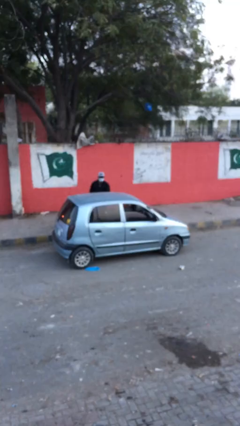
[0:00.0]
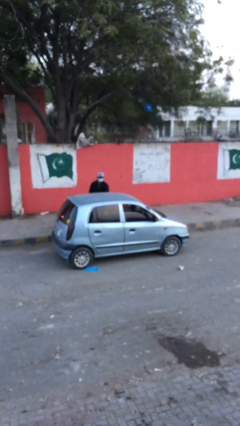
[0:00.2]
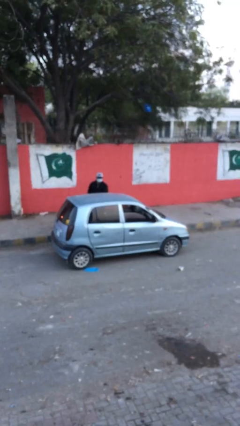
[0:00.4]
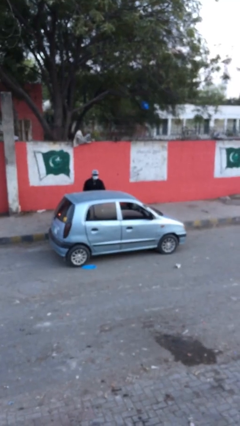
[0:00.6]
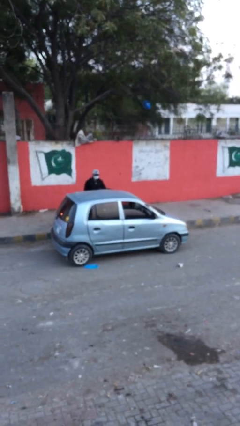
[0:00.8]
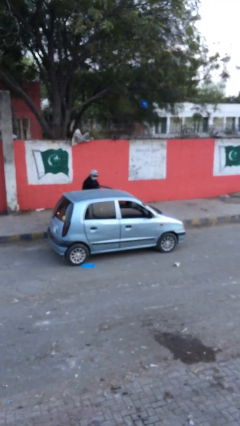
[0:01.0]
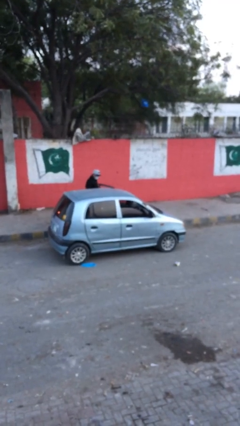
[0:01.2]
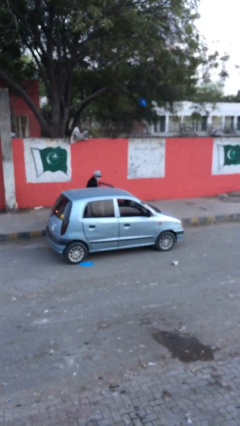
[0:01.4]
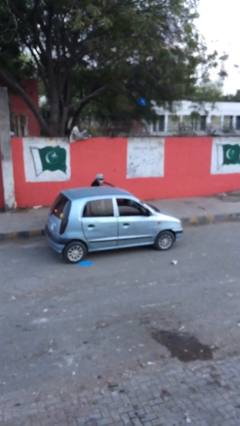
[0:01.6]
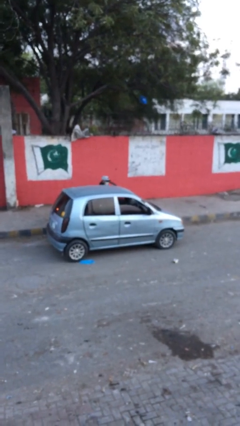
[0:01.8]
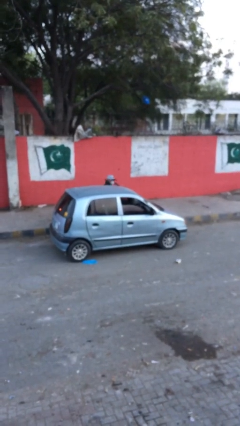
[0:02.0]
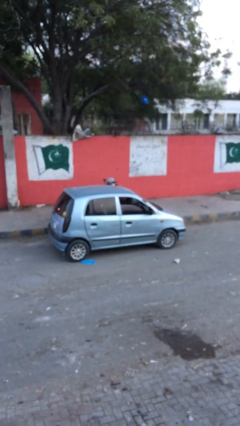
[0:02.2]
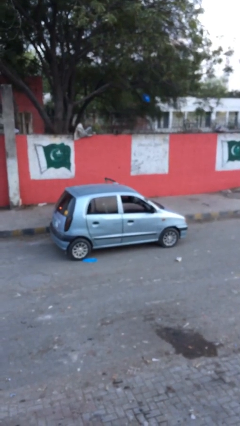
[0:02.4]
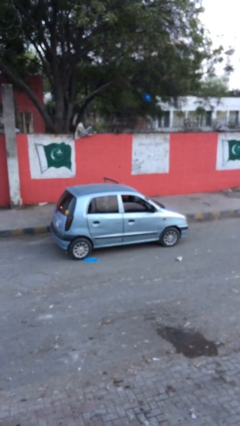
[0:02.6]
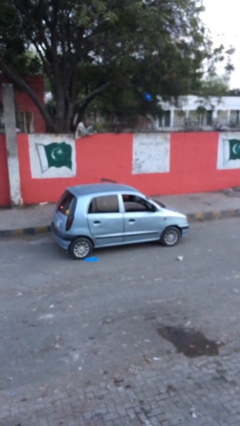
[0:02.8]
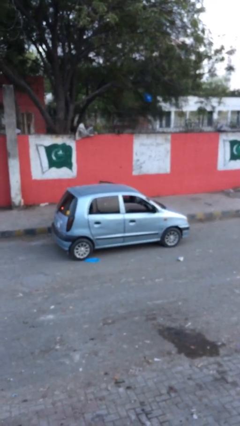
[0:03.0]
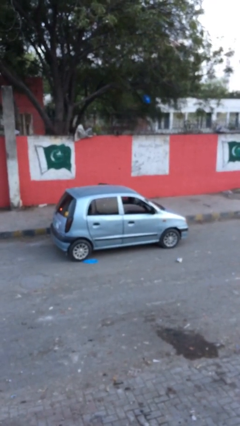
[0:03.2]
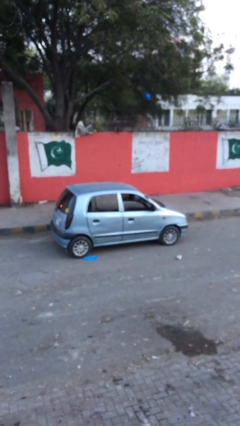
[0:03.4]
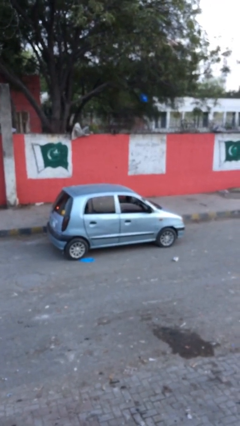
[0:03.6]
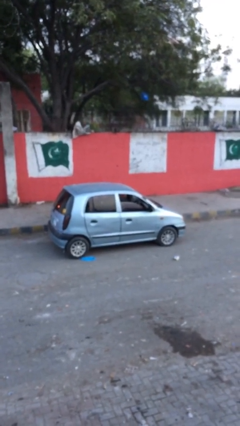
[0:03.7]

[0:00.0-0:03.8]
car picks up person

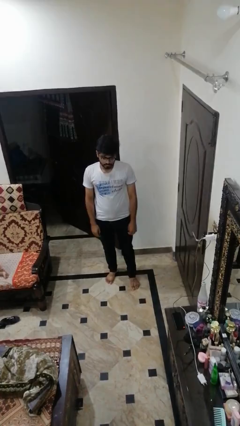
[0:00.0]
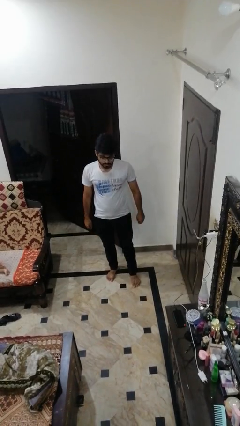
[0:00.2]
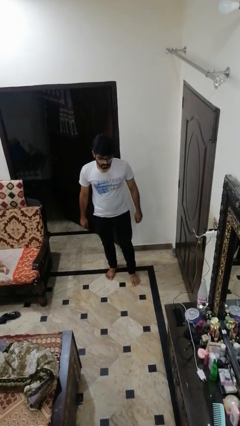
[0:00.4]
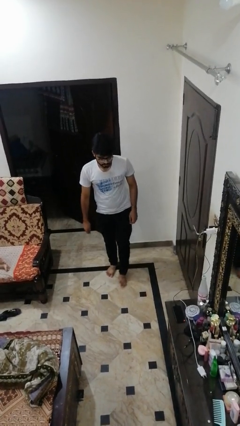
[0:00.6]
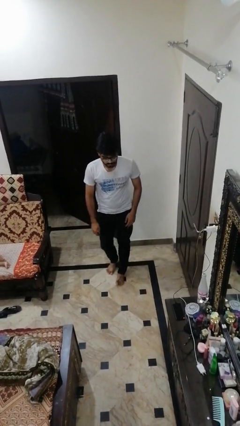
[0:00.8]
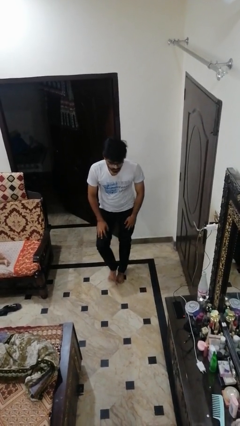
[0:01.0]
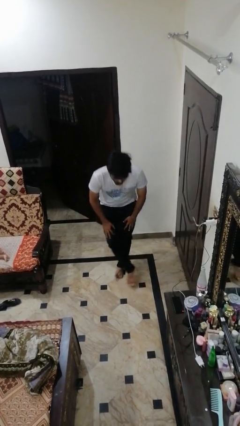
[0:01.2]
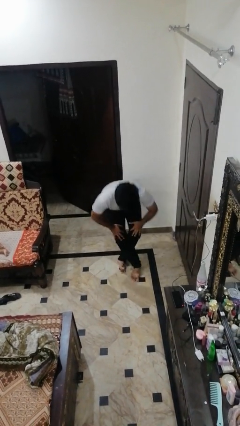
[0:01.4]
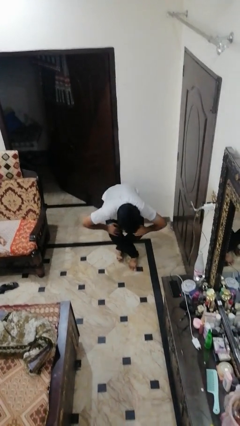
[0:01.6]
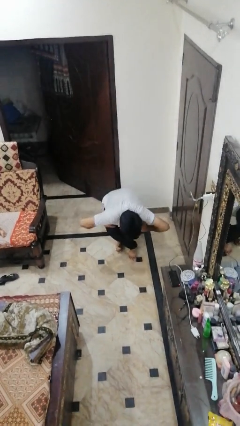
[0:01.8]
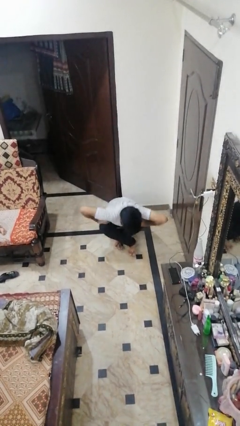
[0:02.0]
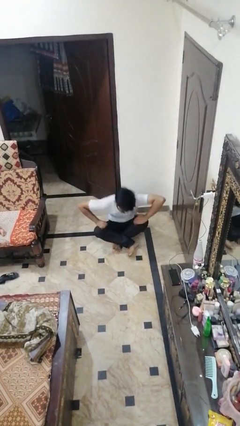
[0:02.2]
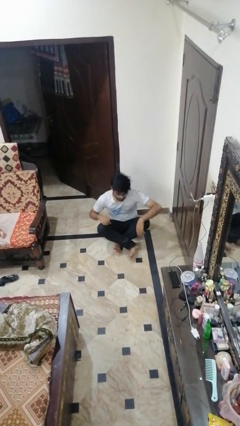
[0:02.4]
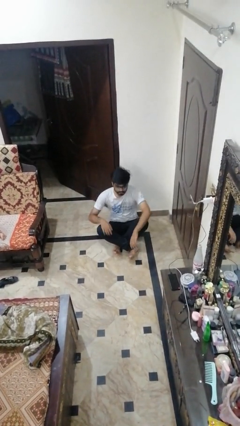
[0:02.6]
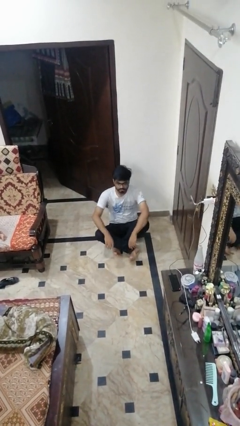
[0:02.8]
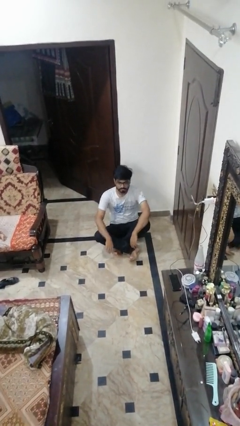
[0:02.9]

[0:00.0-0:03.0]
person sits crisscross

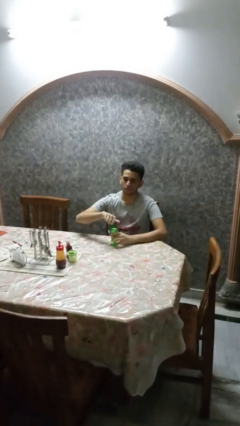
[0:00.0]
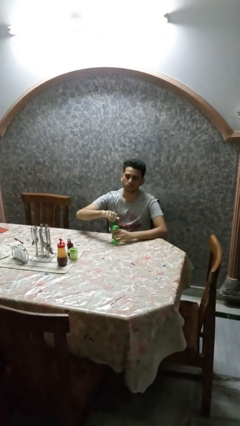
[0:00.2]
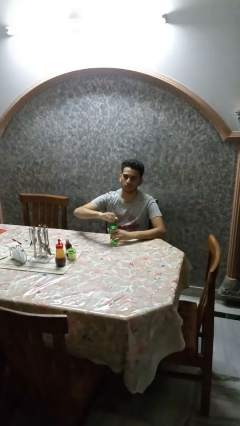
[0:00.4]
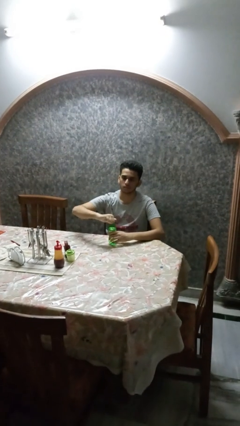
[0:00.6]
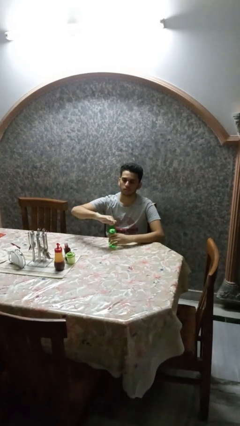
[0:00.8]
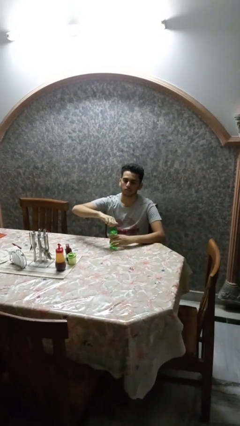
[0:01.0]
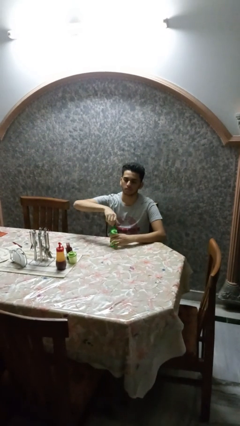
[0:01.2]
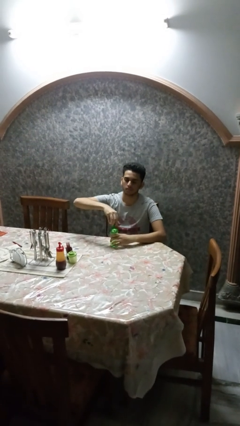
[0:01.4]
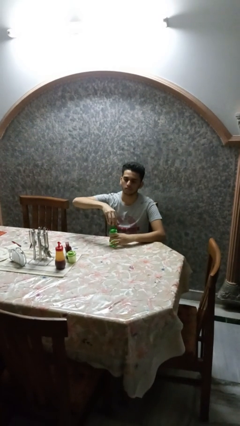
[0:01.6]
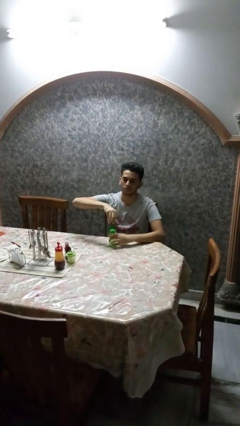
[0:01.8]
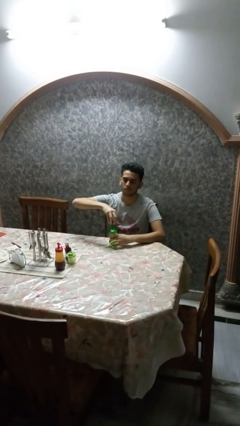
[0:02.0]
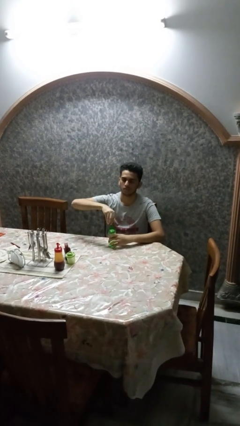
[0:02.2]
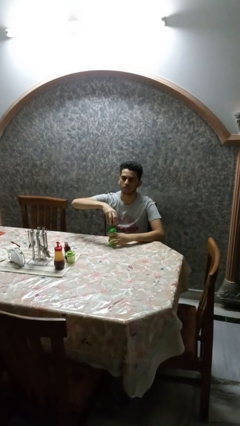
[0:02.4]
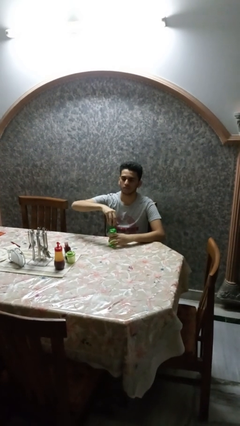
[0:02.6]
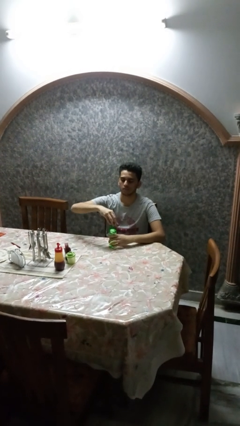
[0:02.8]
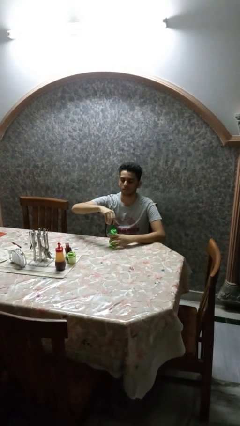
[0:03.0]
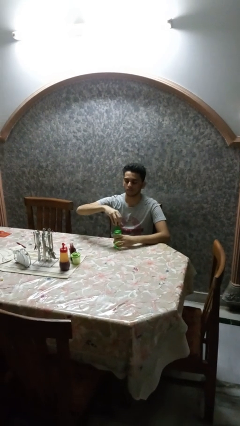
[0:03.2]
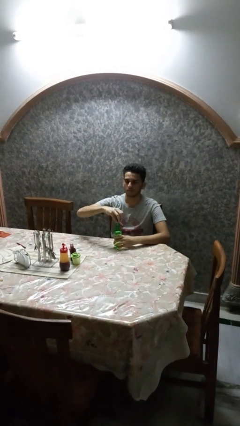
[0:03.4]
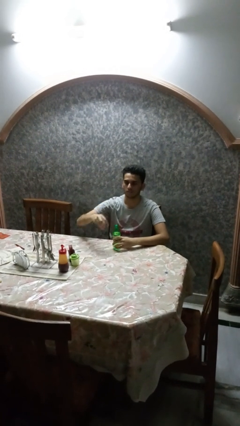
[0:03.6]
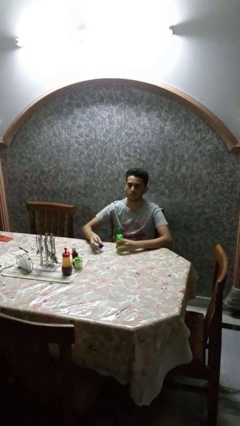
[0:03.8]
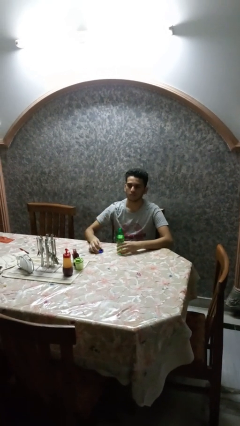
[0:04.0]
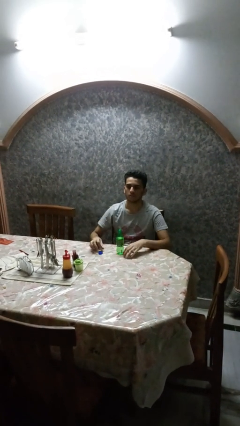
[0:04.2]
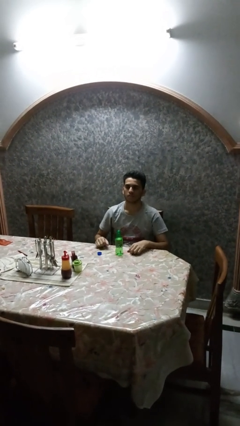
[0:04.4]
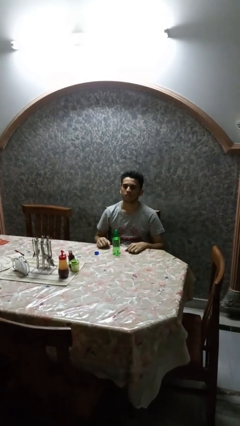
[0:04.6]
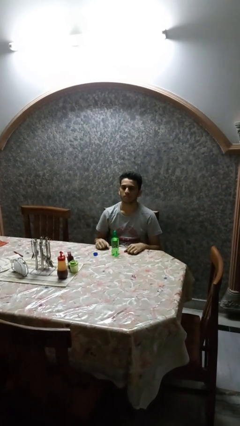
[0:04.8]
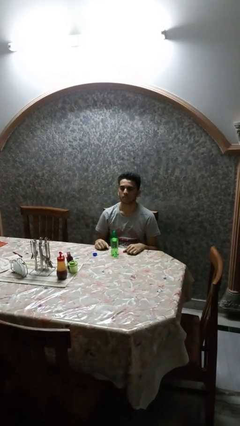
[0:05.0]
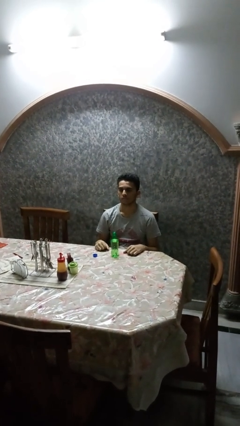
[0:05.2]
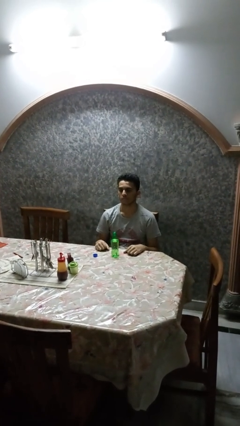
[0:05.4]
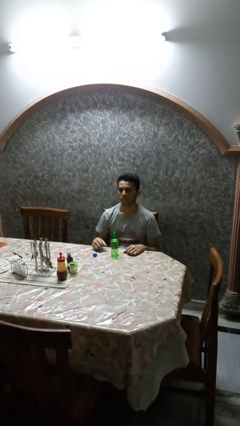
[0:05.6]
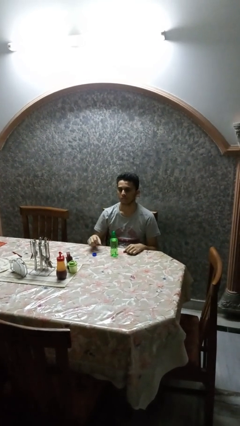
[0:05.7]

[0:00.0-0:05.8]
person unscrews lid from bottle

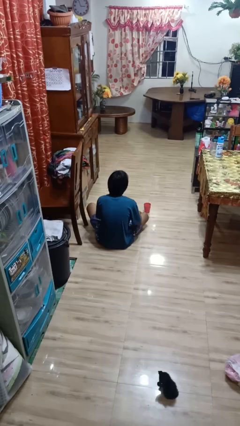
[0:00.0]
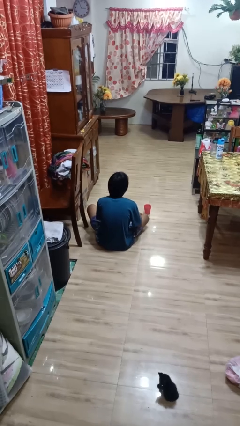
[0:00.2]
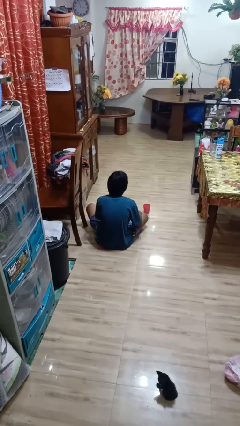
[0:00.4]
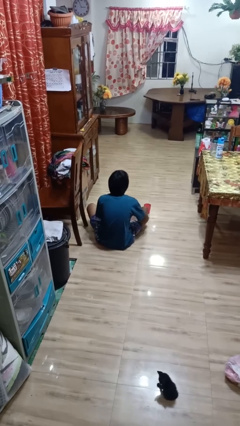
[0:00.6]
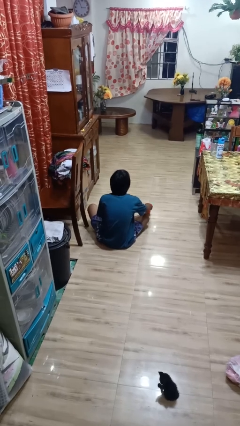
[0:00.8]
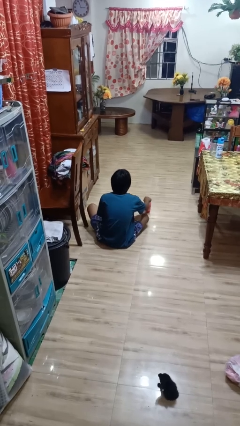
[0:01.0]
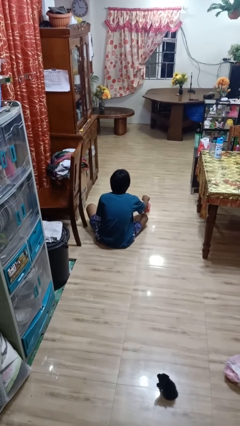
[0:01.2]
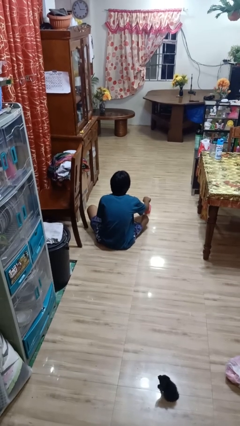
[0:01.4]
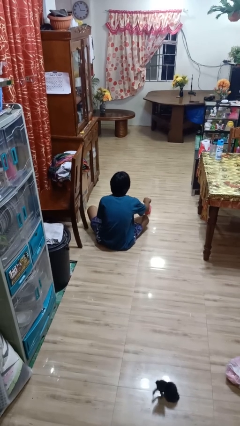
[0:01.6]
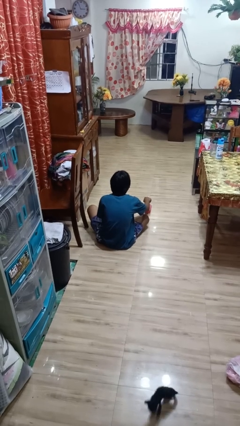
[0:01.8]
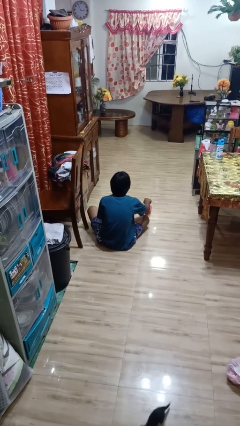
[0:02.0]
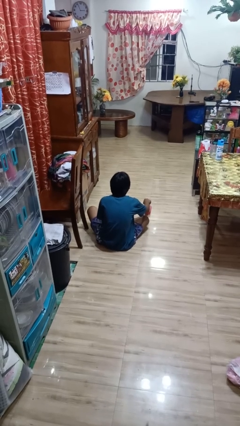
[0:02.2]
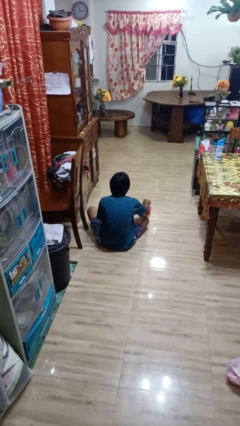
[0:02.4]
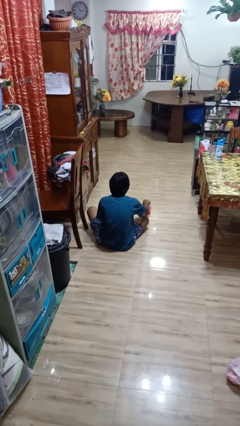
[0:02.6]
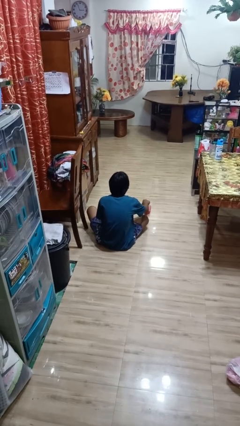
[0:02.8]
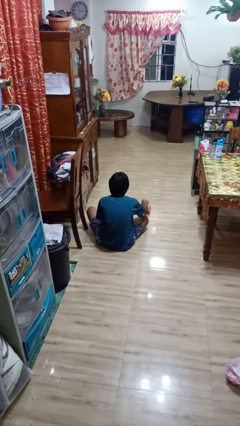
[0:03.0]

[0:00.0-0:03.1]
person spills on floor

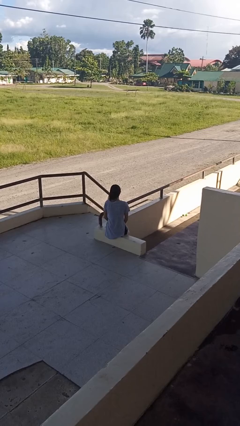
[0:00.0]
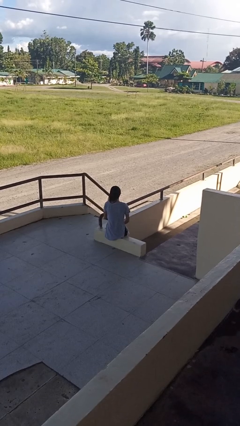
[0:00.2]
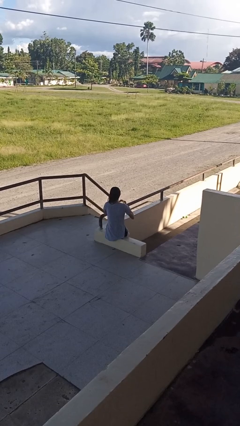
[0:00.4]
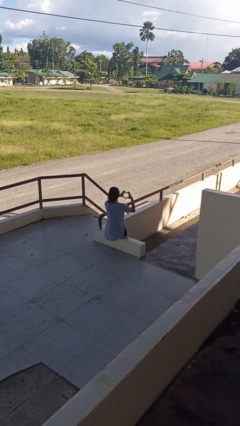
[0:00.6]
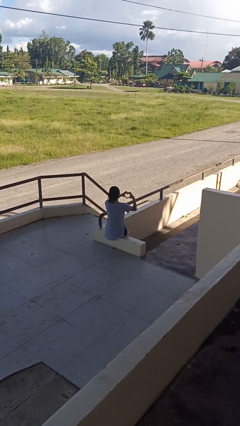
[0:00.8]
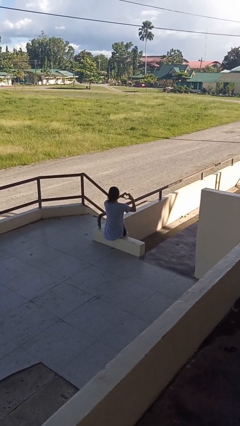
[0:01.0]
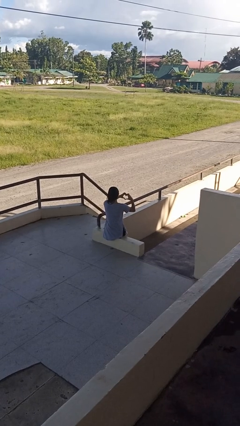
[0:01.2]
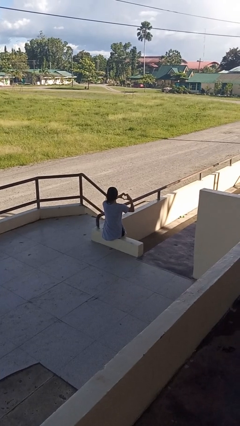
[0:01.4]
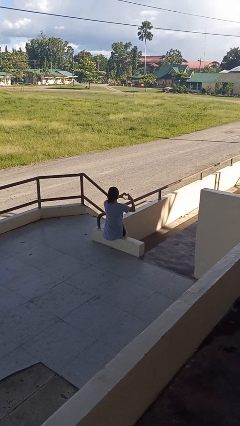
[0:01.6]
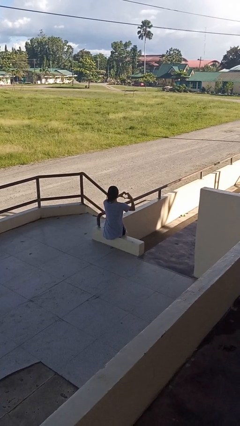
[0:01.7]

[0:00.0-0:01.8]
person gestures heart

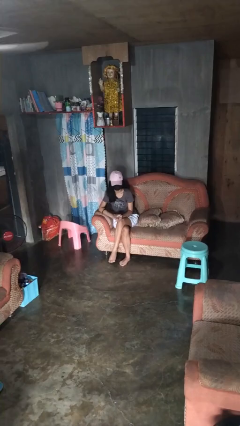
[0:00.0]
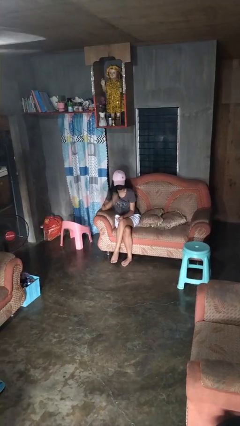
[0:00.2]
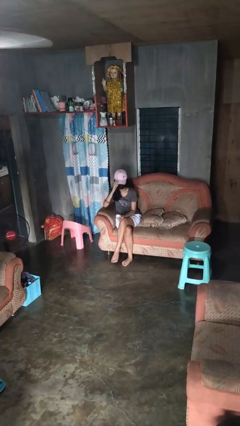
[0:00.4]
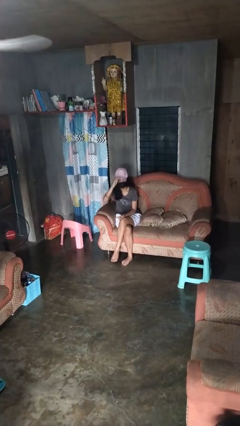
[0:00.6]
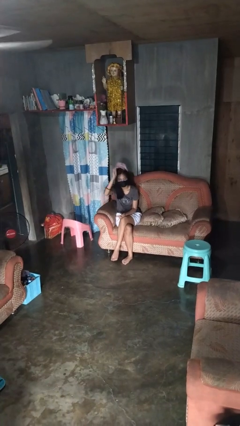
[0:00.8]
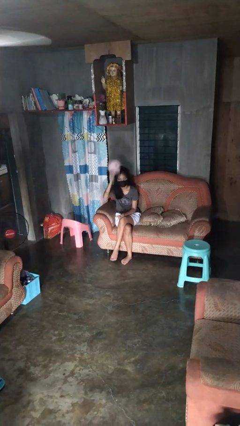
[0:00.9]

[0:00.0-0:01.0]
person takes off hat
